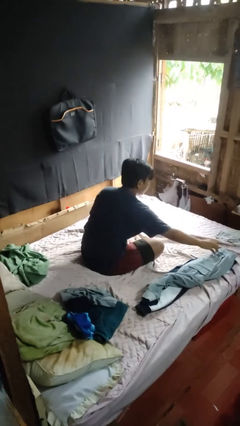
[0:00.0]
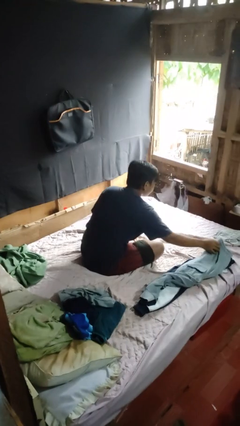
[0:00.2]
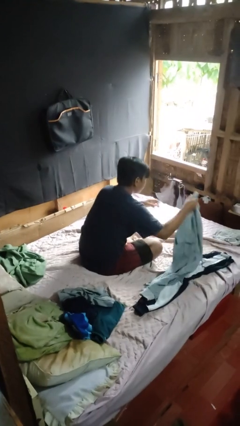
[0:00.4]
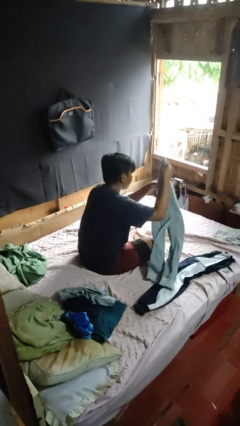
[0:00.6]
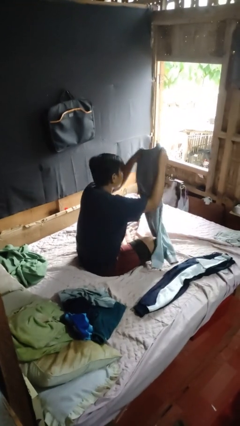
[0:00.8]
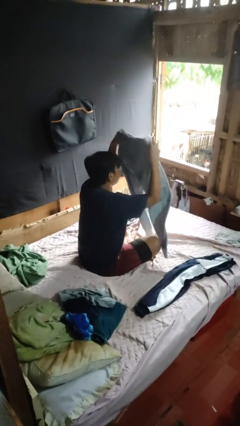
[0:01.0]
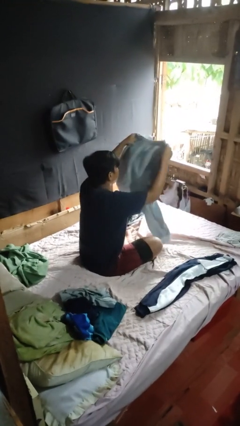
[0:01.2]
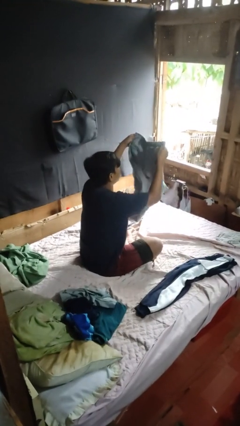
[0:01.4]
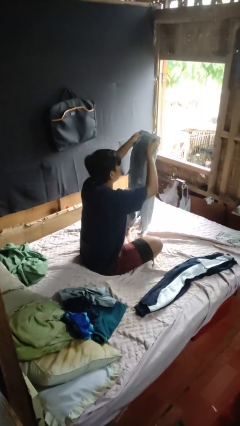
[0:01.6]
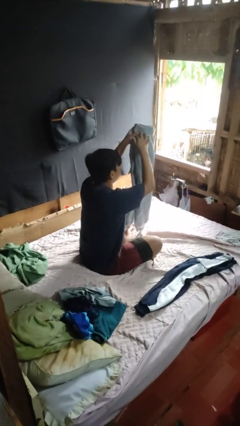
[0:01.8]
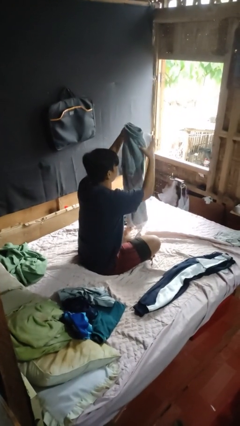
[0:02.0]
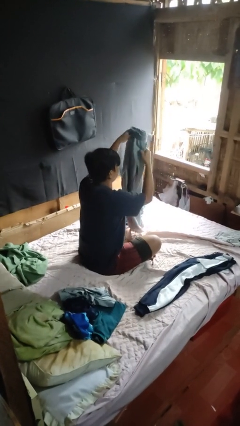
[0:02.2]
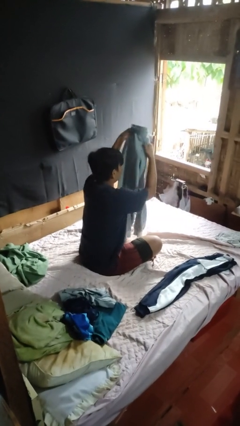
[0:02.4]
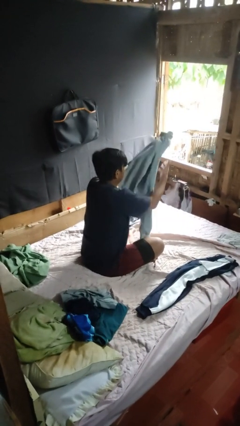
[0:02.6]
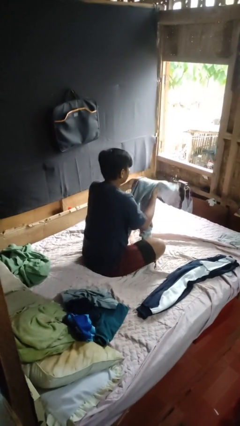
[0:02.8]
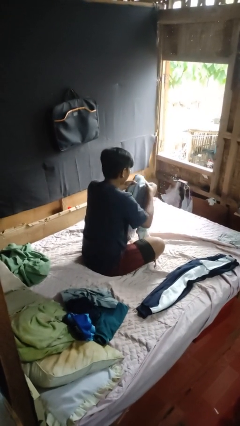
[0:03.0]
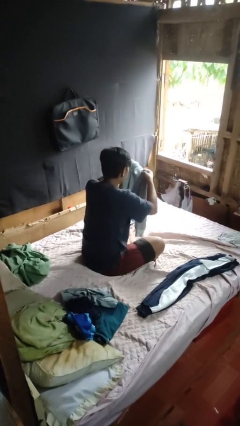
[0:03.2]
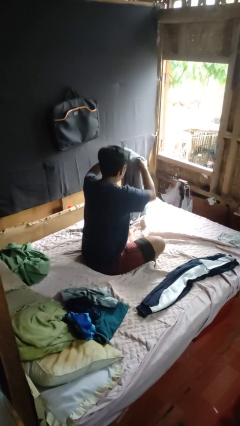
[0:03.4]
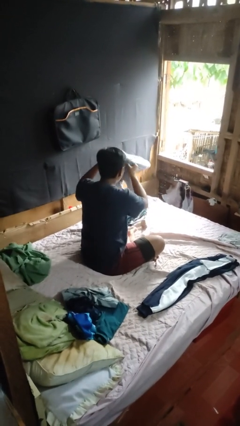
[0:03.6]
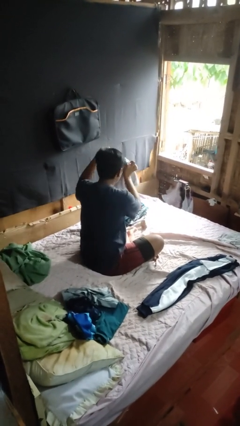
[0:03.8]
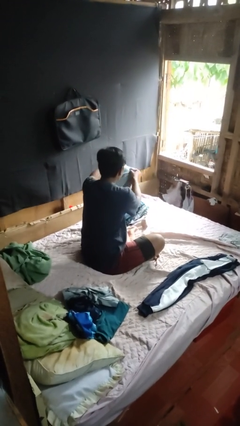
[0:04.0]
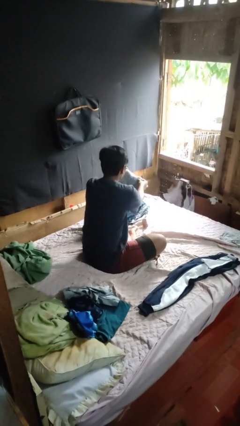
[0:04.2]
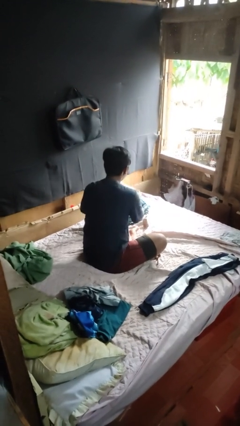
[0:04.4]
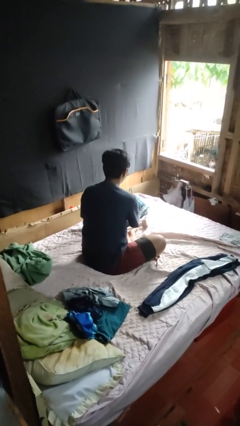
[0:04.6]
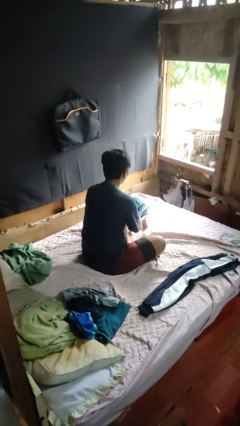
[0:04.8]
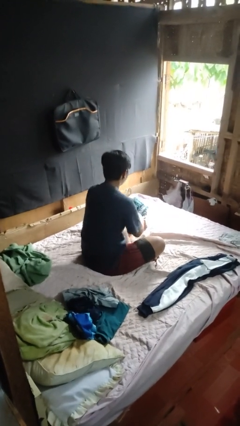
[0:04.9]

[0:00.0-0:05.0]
person folds pants

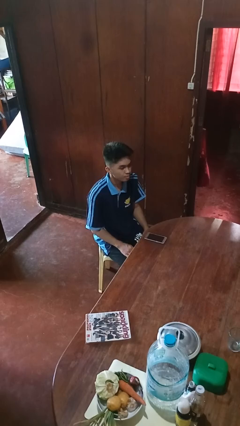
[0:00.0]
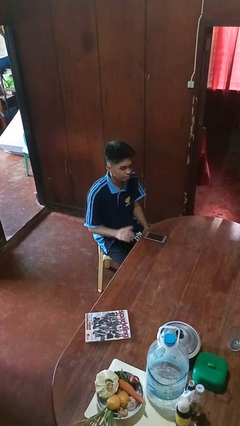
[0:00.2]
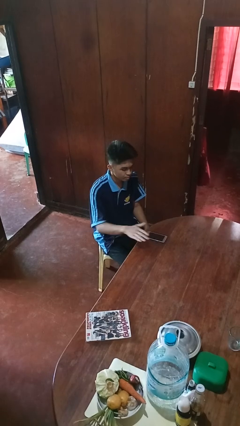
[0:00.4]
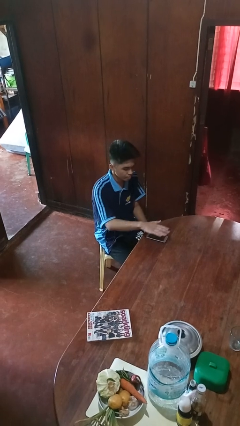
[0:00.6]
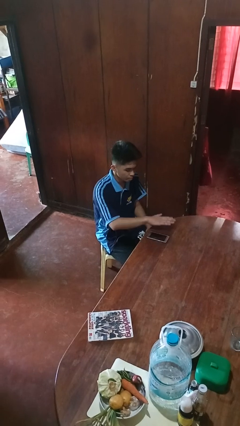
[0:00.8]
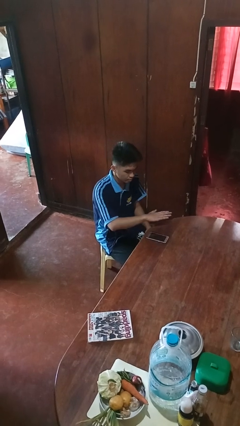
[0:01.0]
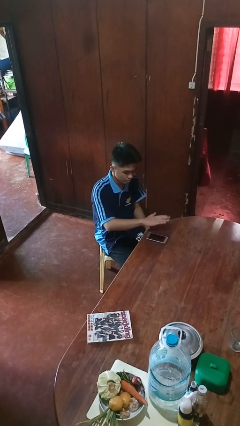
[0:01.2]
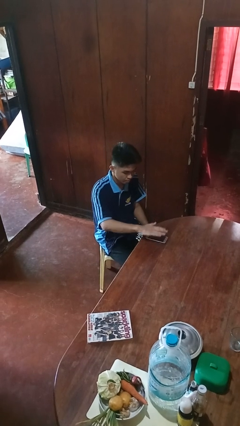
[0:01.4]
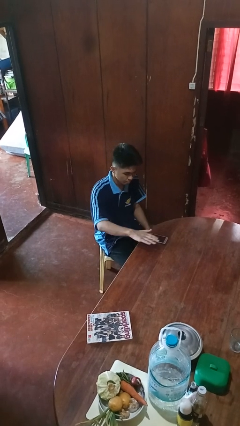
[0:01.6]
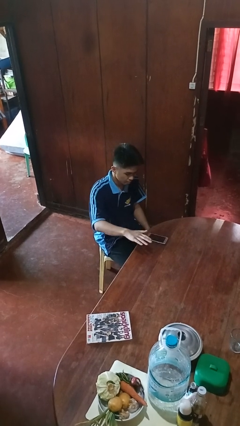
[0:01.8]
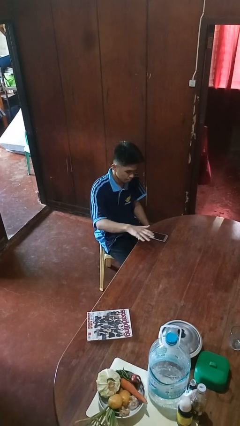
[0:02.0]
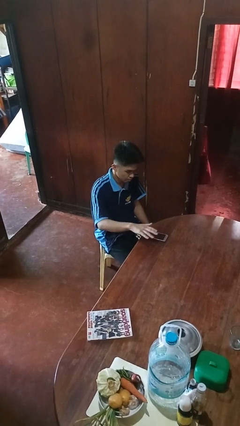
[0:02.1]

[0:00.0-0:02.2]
person waves hand over object

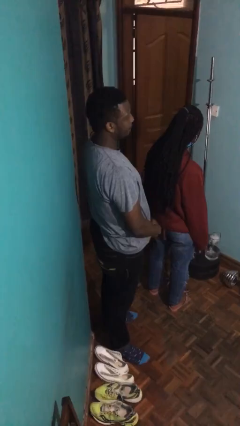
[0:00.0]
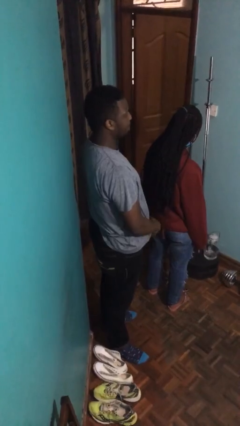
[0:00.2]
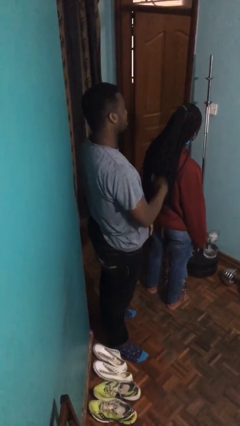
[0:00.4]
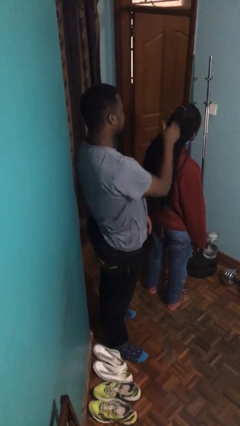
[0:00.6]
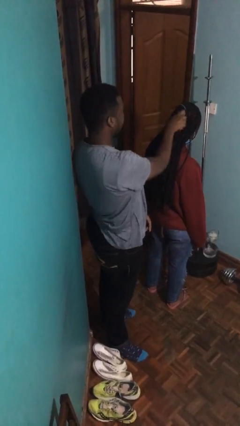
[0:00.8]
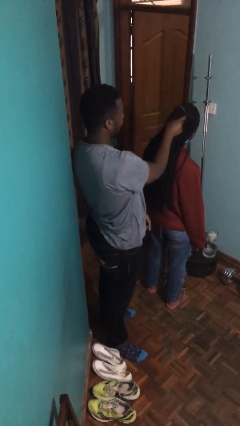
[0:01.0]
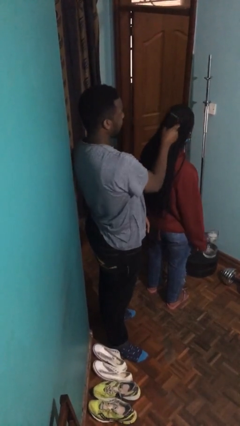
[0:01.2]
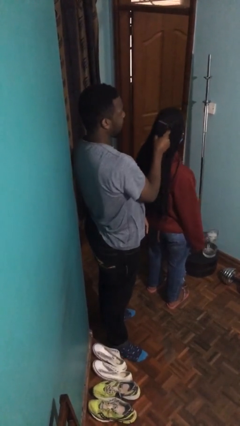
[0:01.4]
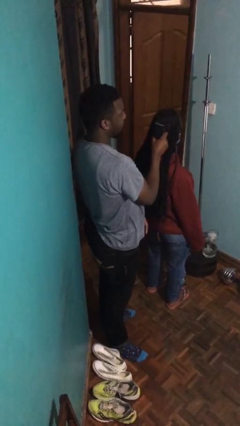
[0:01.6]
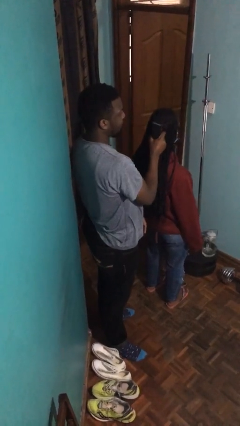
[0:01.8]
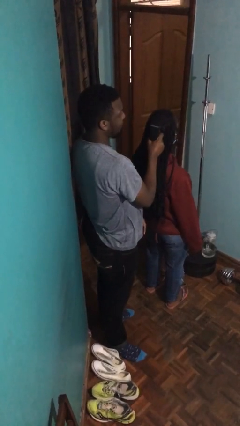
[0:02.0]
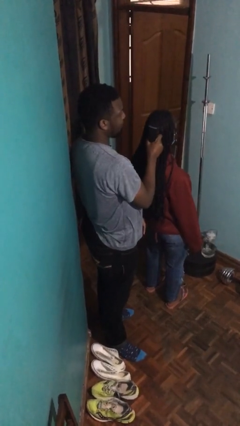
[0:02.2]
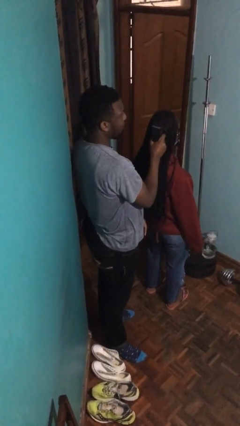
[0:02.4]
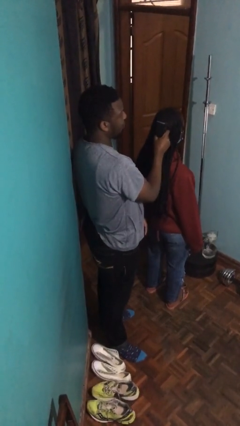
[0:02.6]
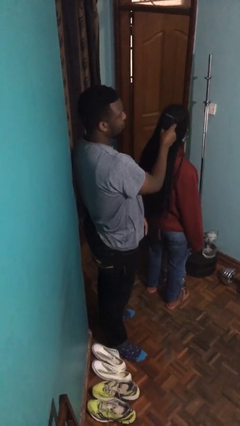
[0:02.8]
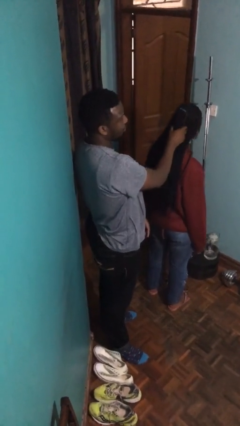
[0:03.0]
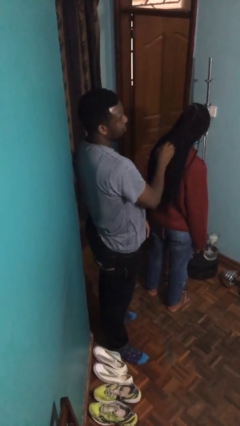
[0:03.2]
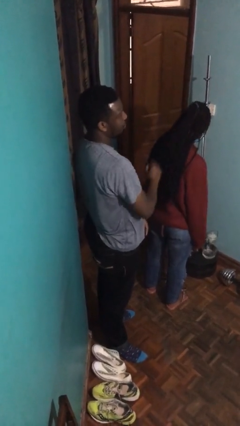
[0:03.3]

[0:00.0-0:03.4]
person grabs person by hair

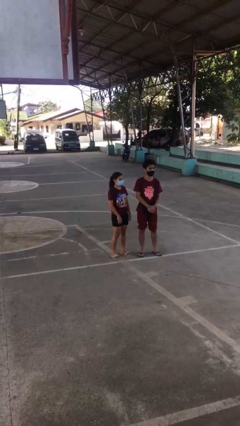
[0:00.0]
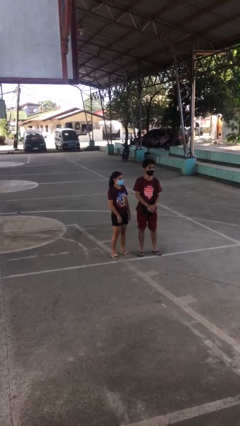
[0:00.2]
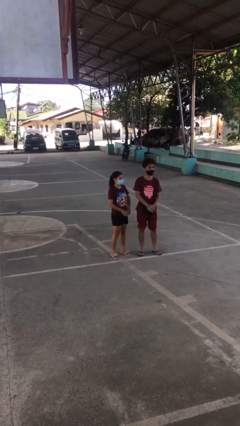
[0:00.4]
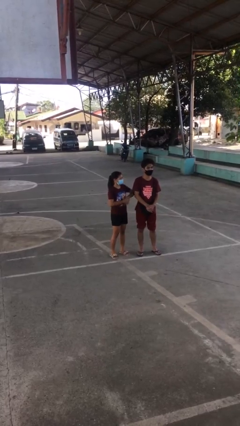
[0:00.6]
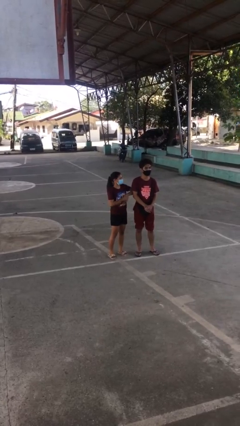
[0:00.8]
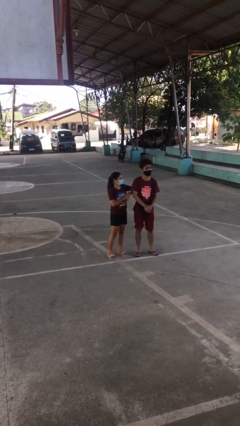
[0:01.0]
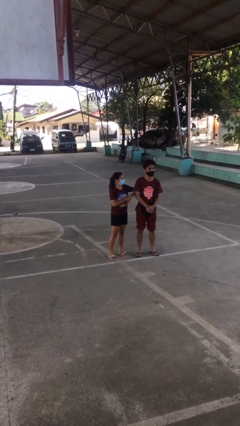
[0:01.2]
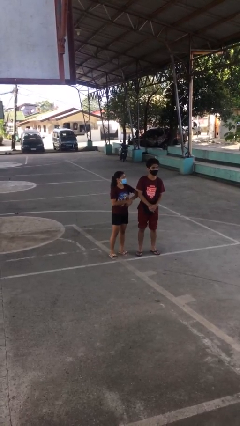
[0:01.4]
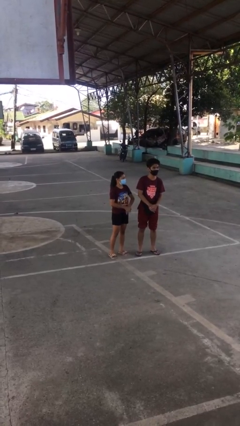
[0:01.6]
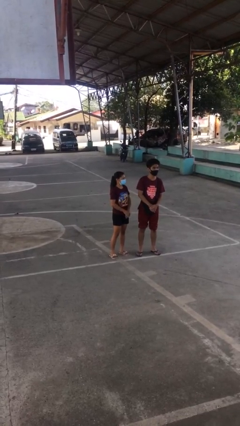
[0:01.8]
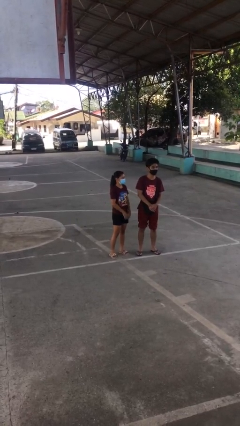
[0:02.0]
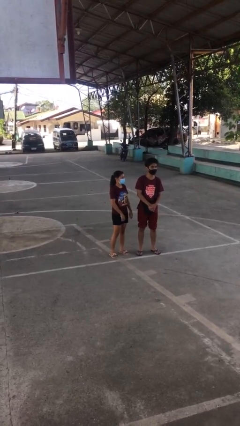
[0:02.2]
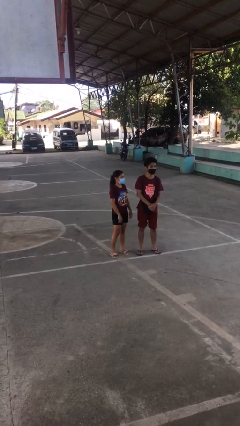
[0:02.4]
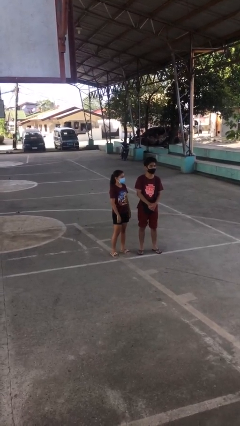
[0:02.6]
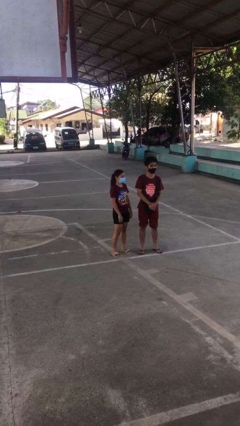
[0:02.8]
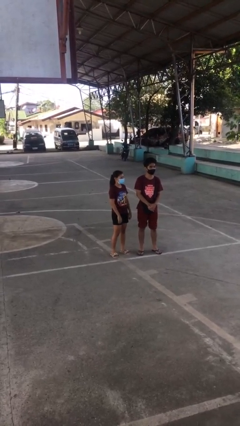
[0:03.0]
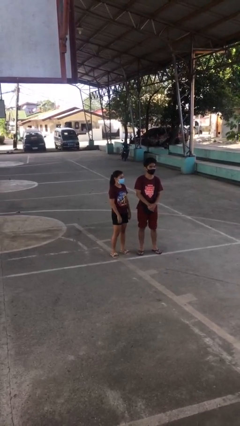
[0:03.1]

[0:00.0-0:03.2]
person nudges person with elbow

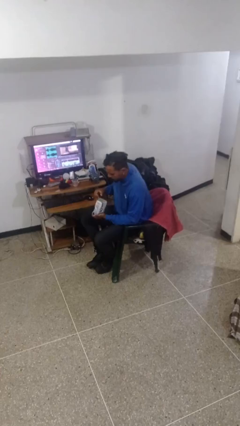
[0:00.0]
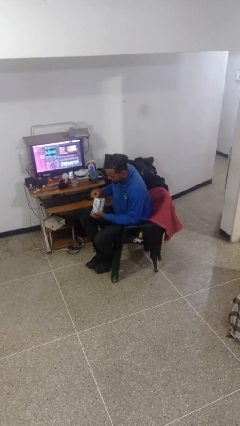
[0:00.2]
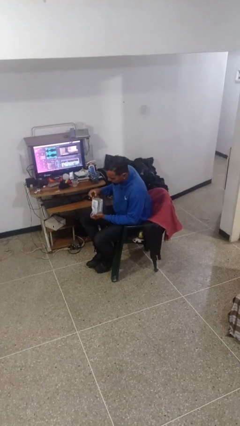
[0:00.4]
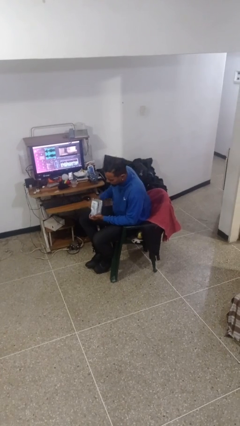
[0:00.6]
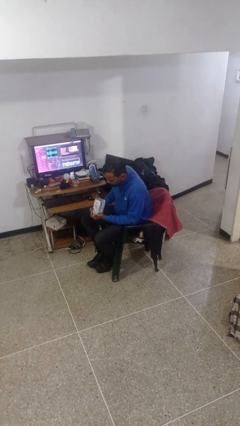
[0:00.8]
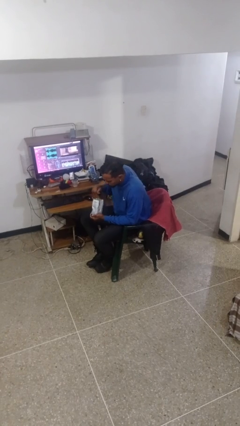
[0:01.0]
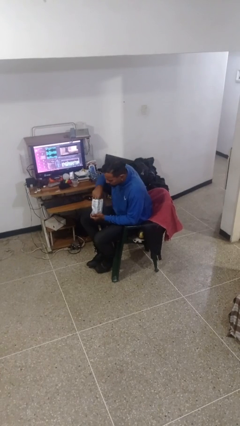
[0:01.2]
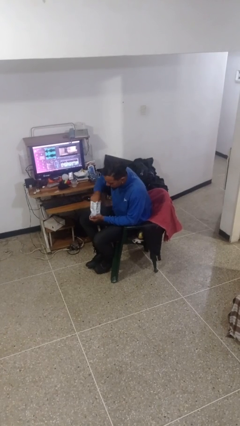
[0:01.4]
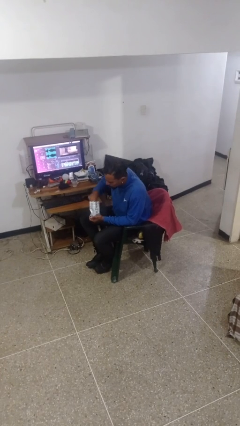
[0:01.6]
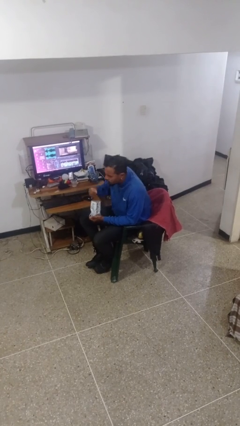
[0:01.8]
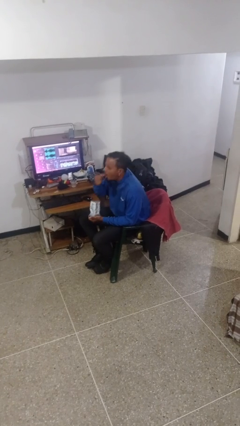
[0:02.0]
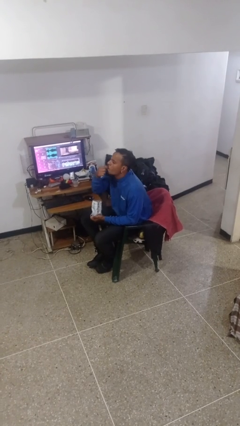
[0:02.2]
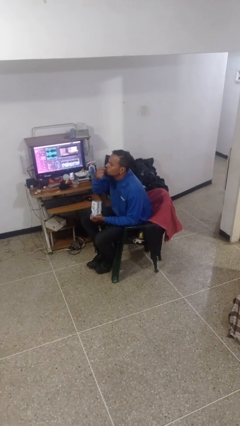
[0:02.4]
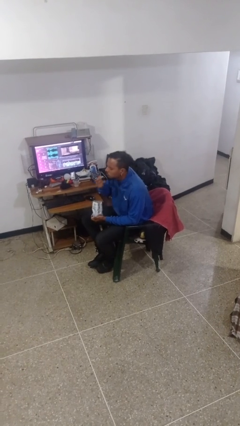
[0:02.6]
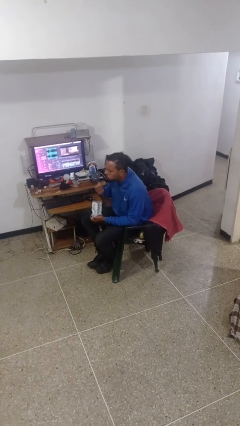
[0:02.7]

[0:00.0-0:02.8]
person eats snack from bag

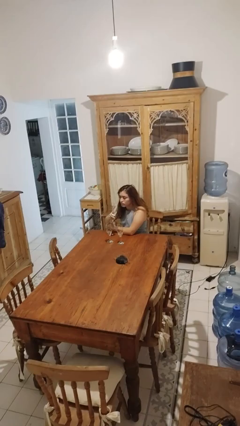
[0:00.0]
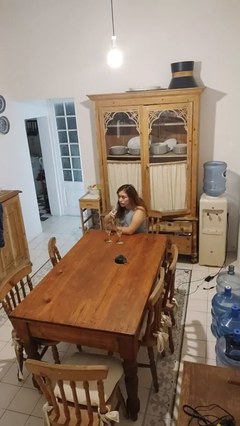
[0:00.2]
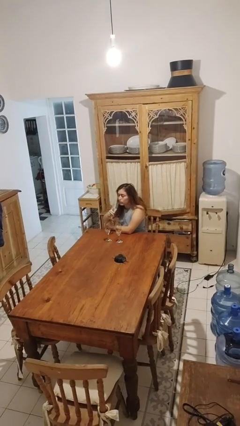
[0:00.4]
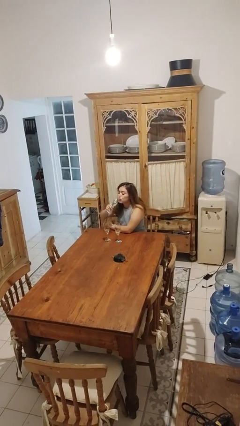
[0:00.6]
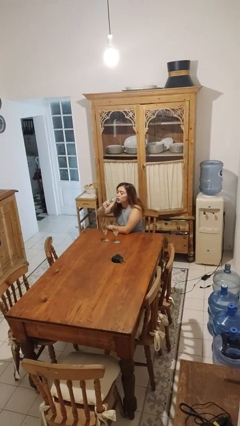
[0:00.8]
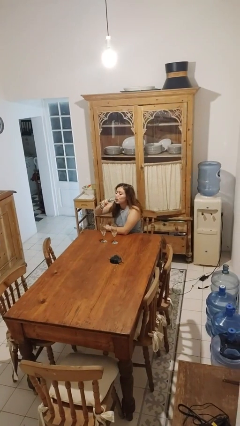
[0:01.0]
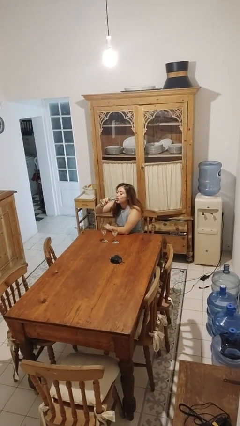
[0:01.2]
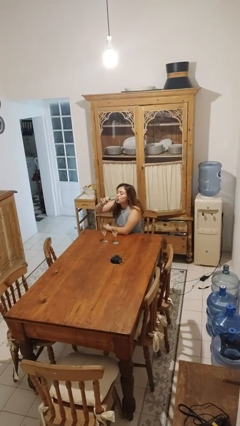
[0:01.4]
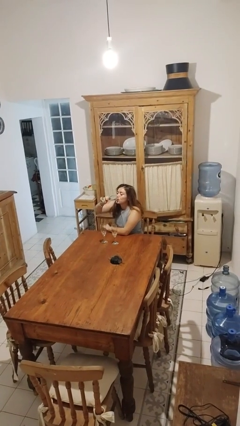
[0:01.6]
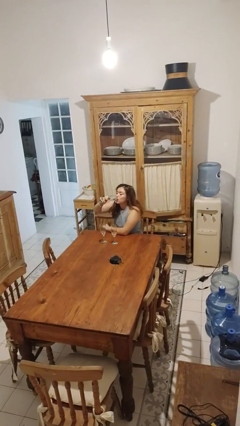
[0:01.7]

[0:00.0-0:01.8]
person drinks from shotglass
